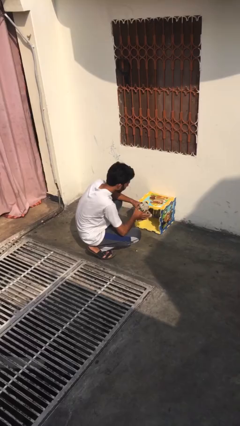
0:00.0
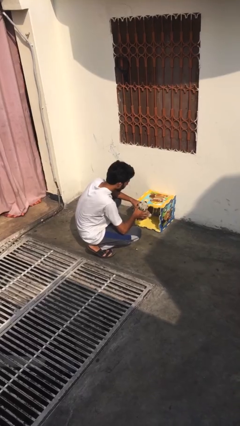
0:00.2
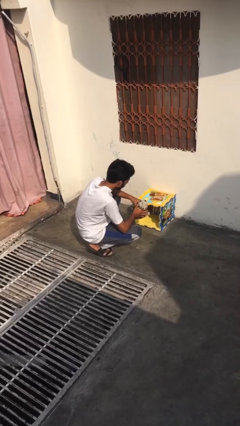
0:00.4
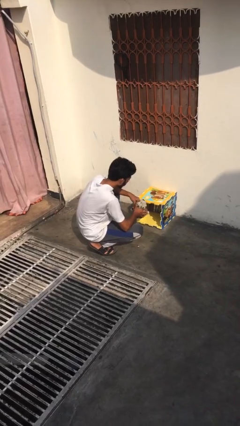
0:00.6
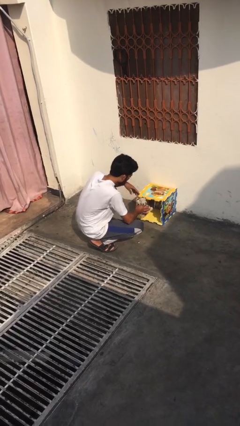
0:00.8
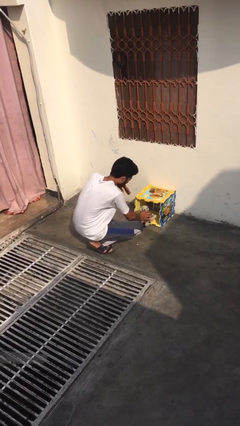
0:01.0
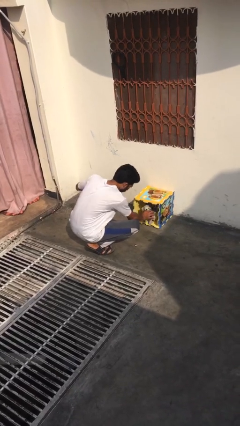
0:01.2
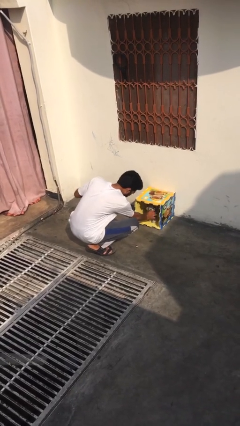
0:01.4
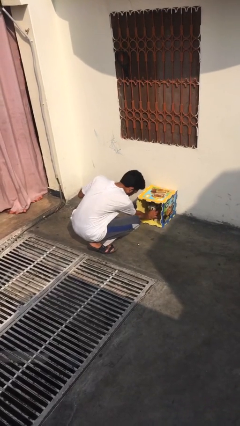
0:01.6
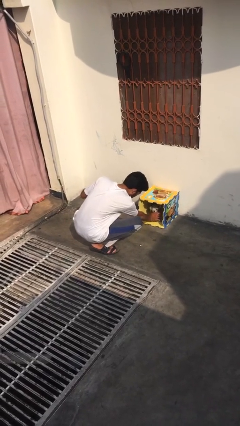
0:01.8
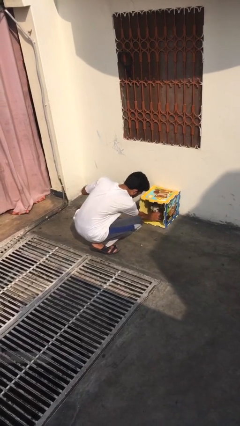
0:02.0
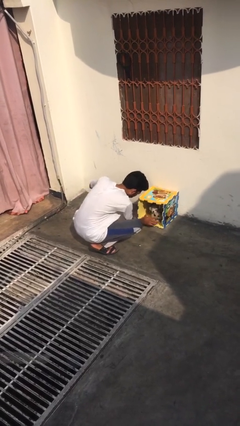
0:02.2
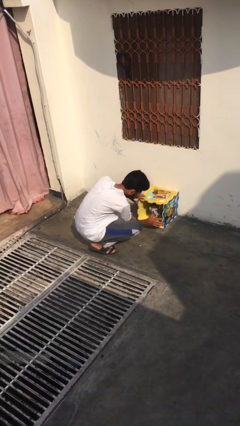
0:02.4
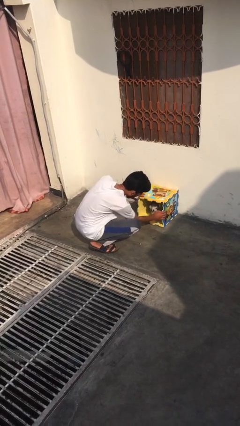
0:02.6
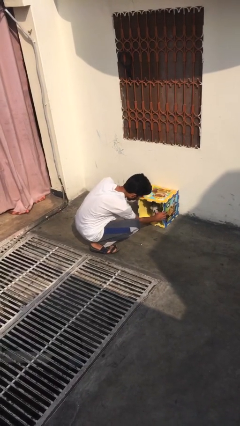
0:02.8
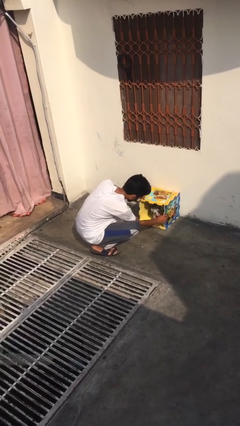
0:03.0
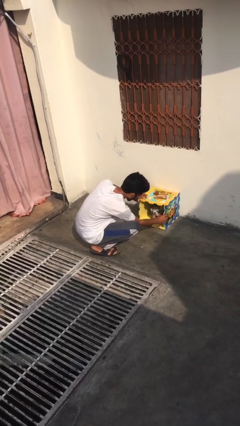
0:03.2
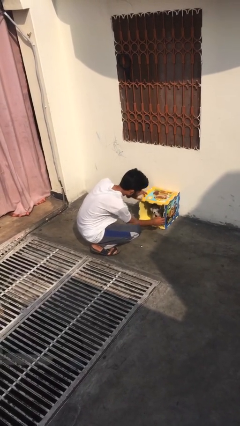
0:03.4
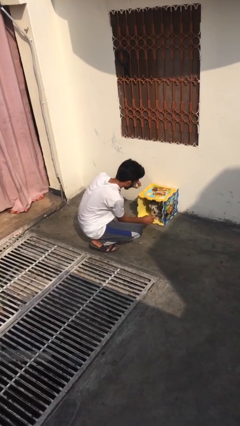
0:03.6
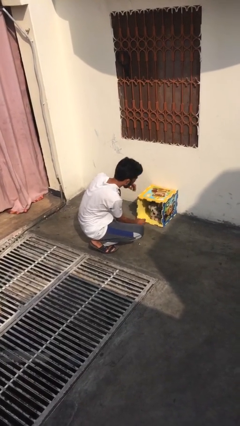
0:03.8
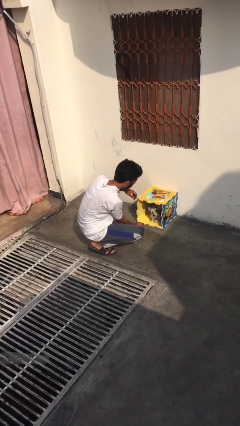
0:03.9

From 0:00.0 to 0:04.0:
person crates dog

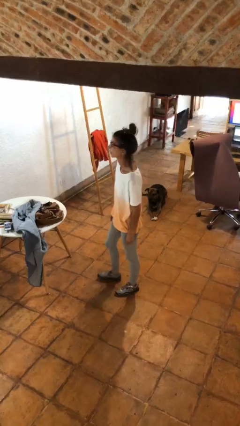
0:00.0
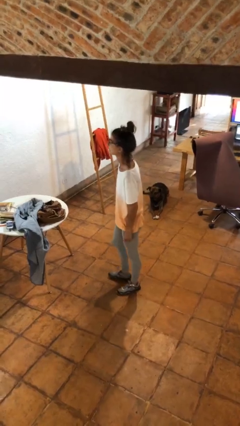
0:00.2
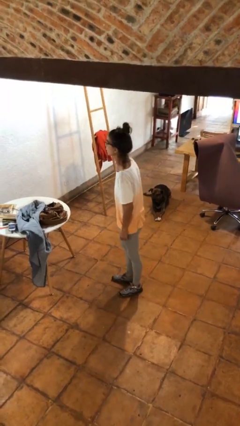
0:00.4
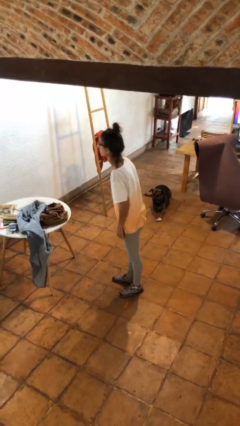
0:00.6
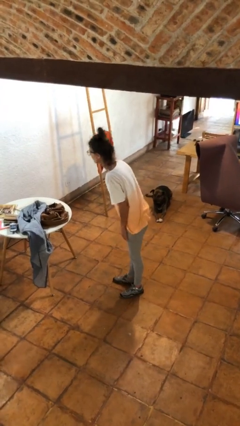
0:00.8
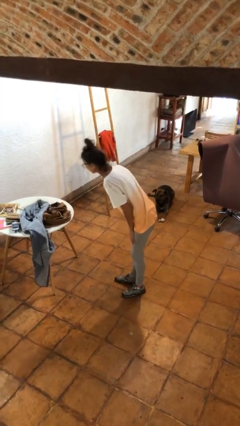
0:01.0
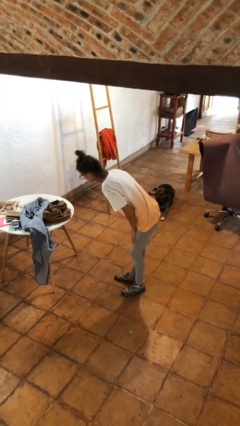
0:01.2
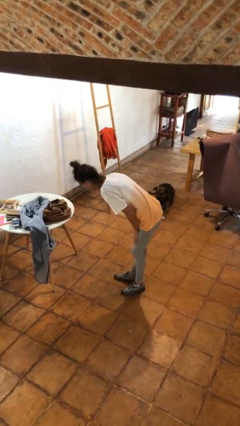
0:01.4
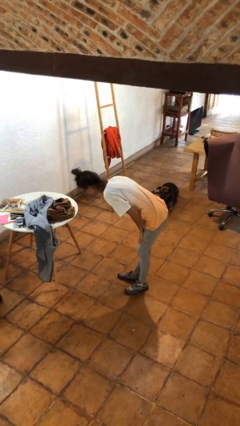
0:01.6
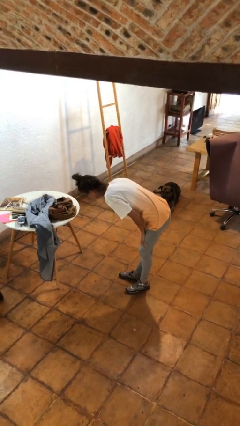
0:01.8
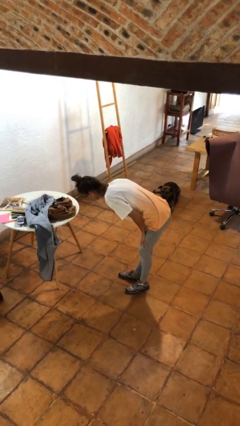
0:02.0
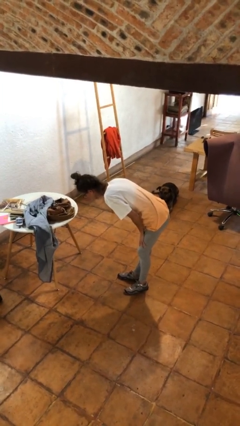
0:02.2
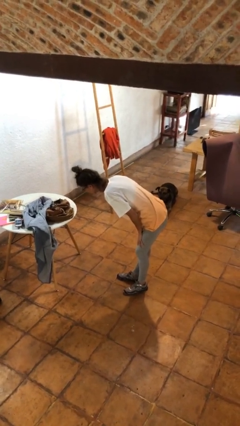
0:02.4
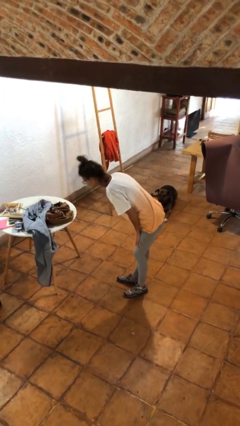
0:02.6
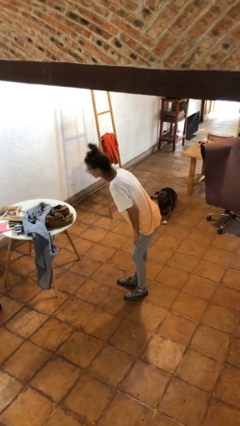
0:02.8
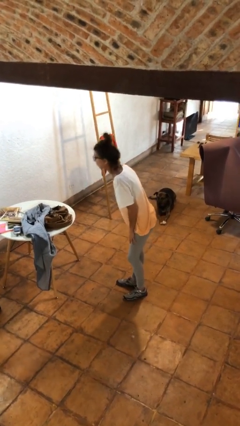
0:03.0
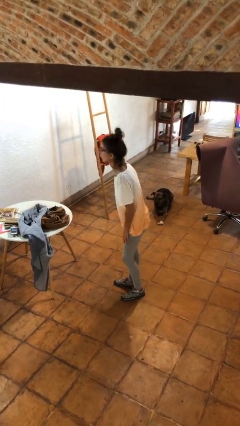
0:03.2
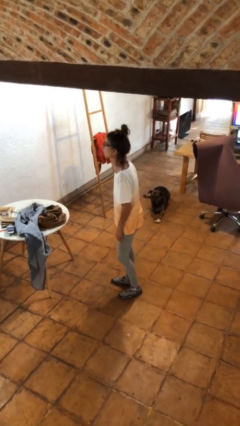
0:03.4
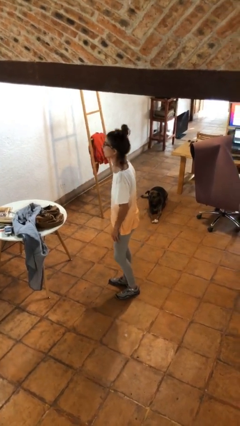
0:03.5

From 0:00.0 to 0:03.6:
person bows

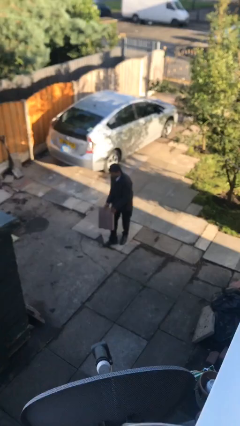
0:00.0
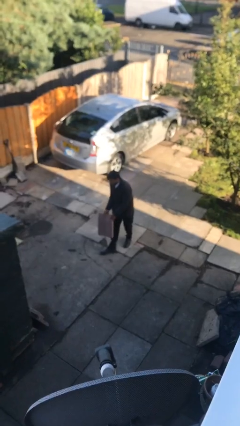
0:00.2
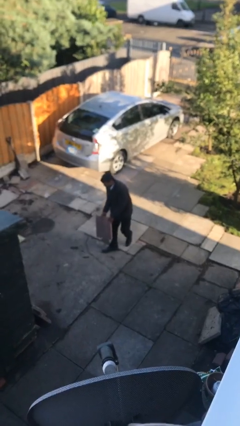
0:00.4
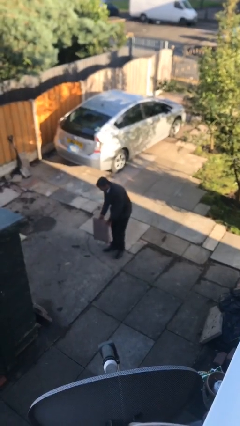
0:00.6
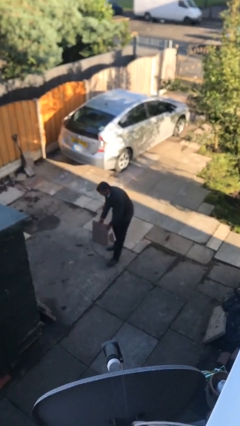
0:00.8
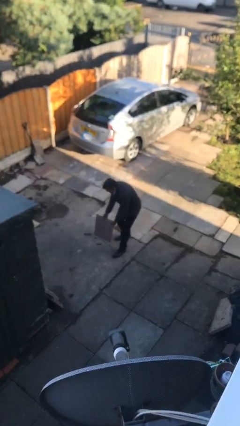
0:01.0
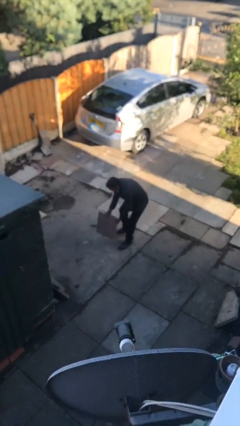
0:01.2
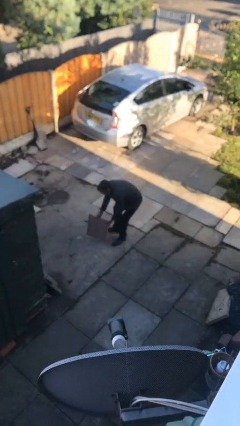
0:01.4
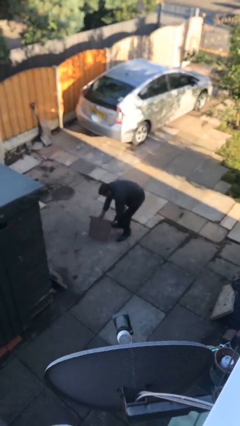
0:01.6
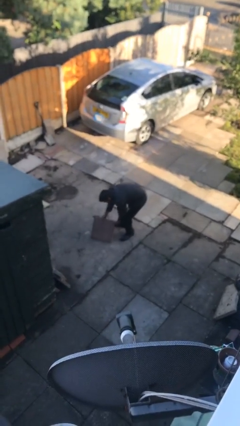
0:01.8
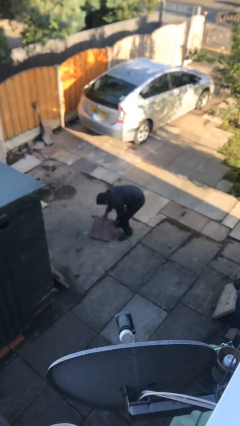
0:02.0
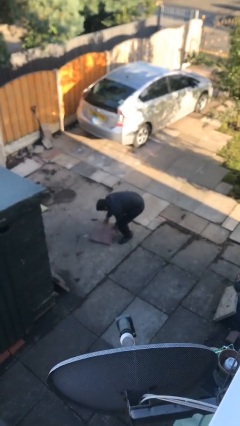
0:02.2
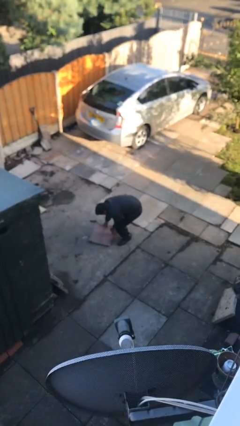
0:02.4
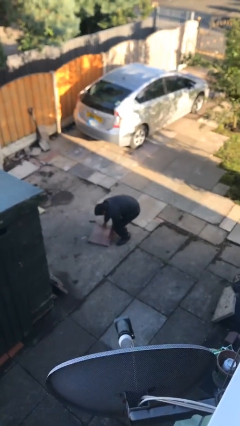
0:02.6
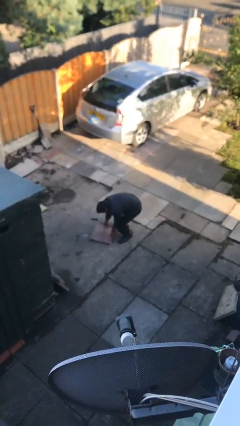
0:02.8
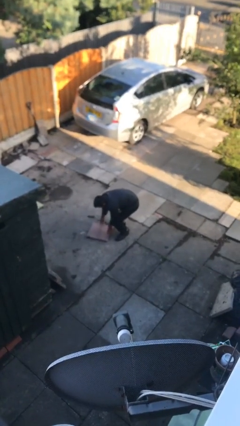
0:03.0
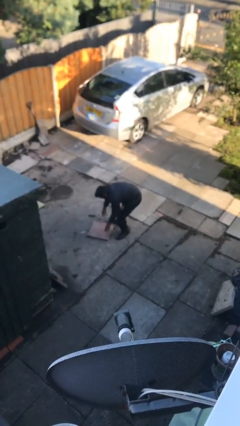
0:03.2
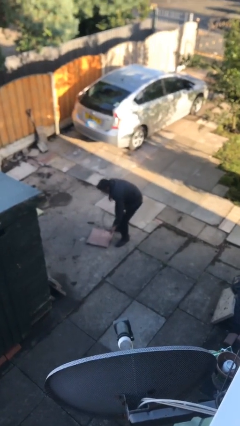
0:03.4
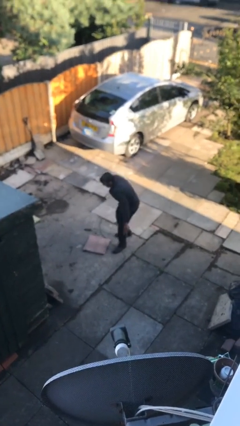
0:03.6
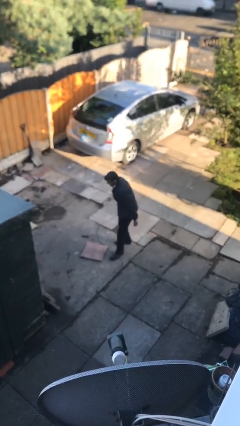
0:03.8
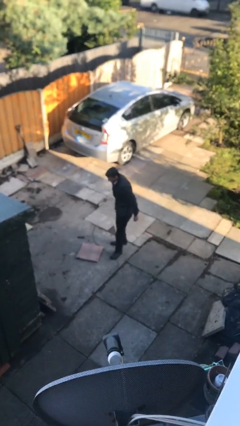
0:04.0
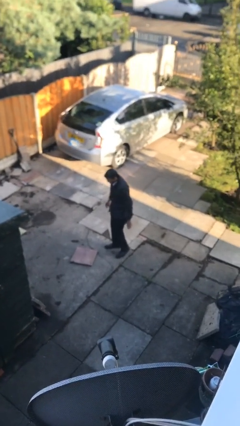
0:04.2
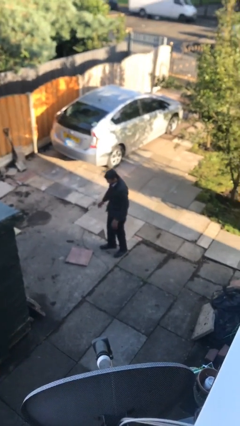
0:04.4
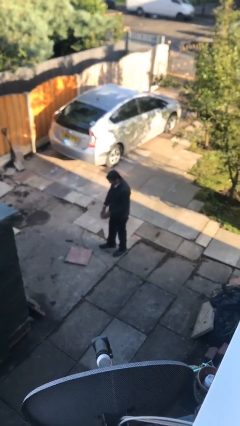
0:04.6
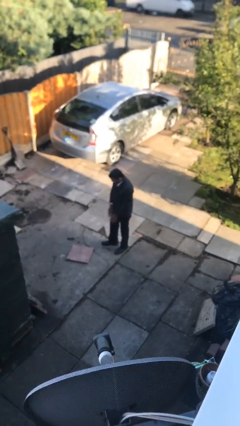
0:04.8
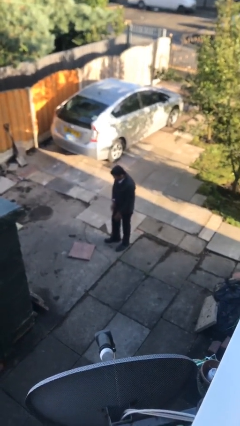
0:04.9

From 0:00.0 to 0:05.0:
person puts down object on floor

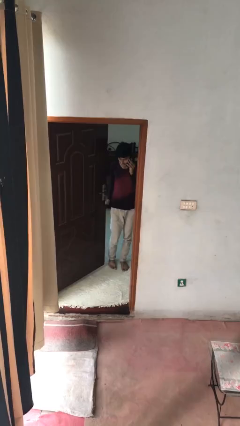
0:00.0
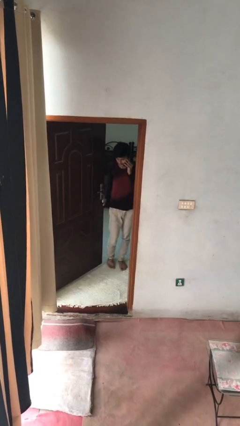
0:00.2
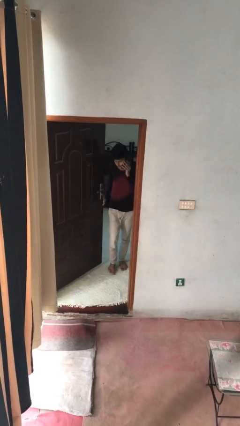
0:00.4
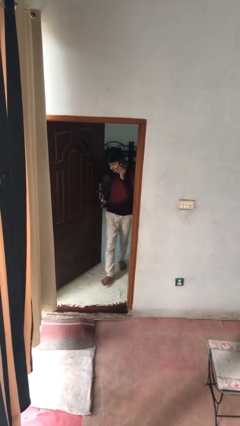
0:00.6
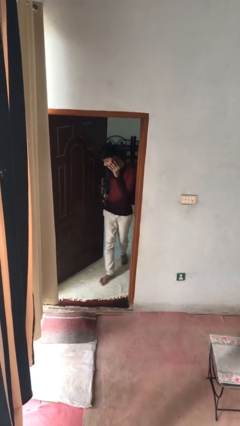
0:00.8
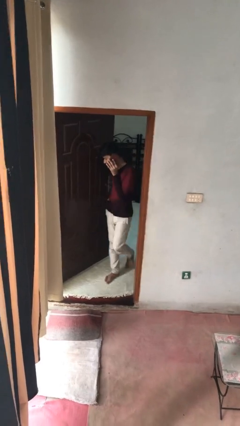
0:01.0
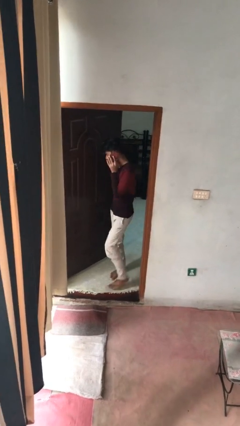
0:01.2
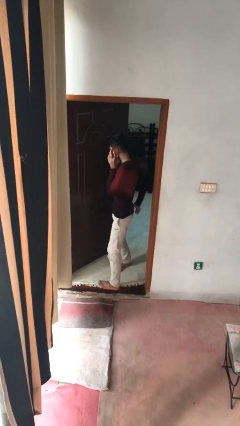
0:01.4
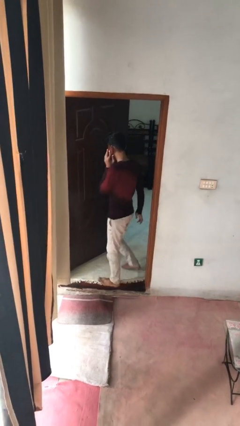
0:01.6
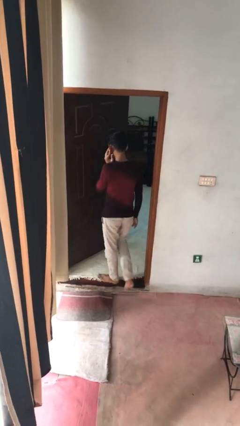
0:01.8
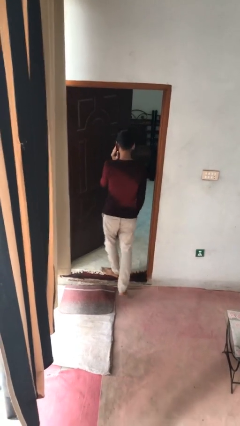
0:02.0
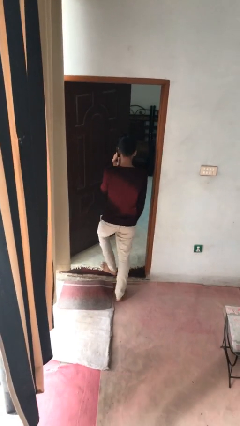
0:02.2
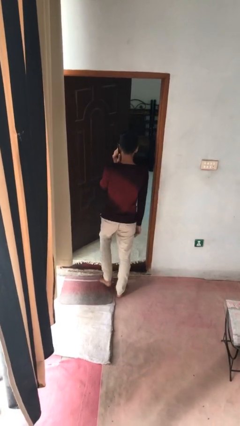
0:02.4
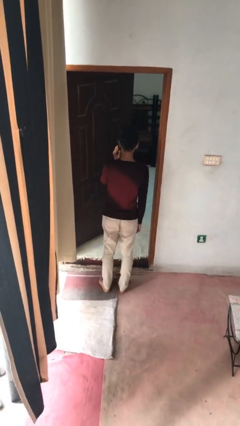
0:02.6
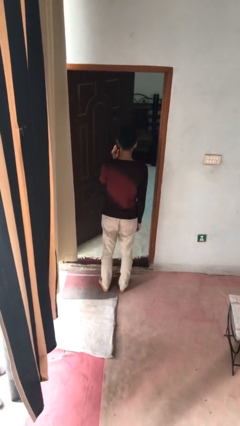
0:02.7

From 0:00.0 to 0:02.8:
person enters scene through structure

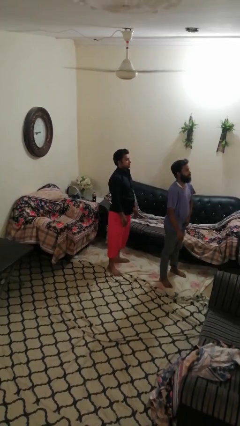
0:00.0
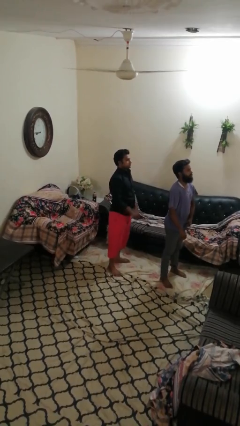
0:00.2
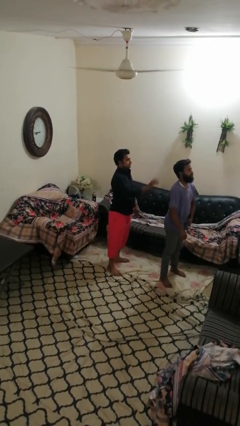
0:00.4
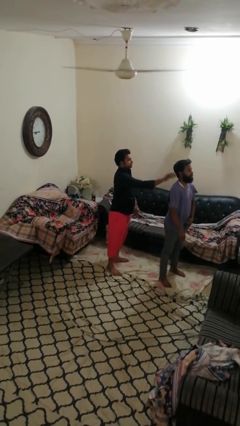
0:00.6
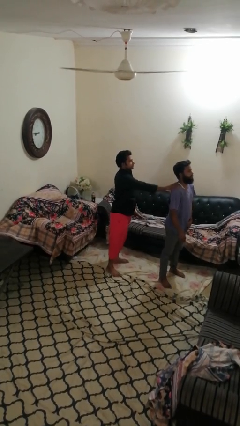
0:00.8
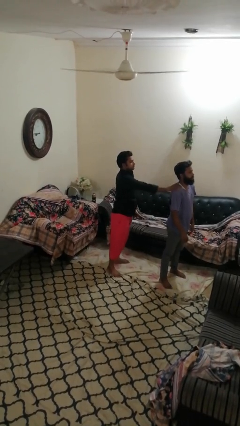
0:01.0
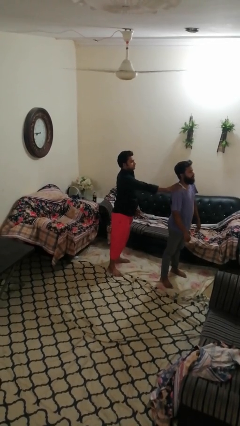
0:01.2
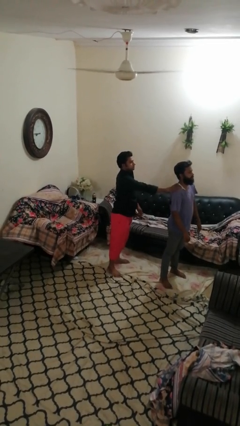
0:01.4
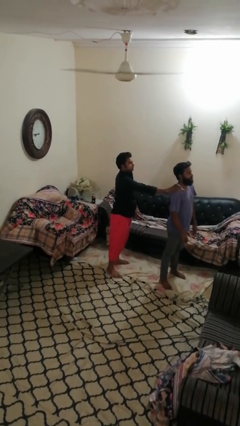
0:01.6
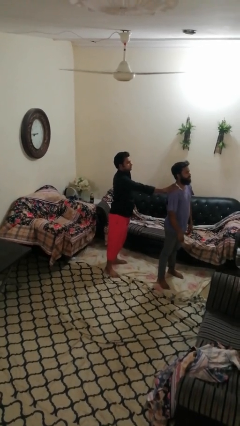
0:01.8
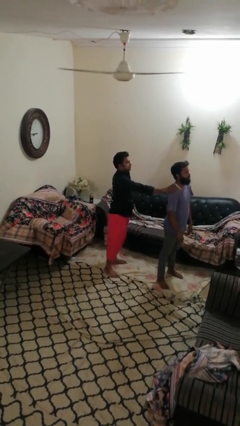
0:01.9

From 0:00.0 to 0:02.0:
person grabs person by shoulder
